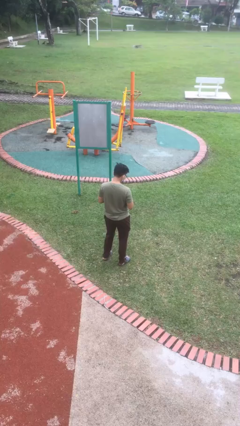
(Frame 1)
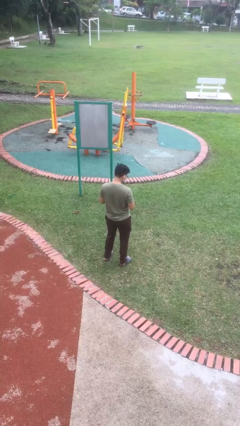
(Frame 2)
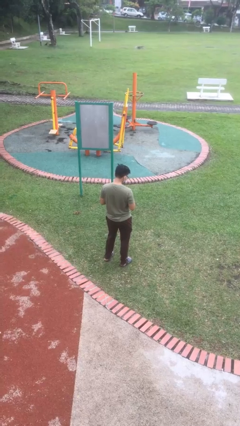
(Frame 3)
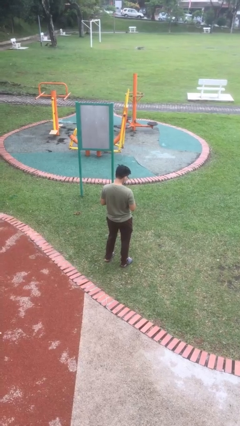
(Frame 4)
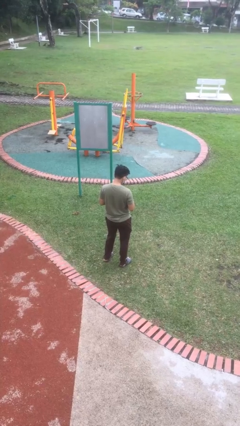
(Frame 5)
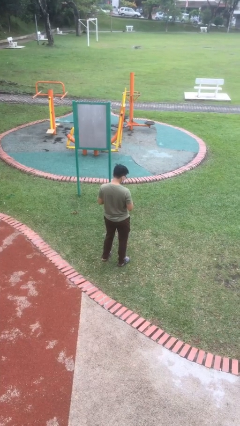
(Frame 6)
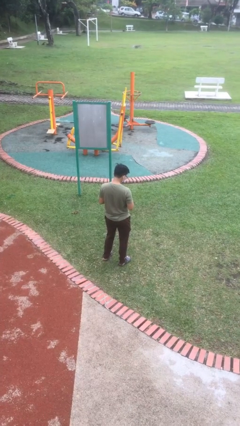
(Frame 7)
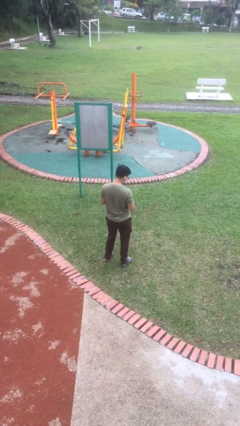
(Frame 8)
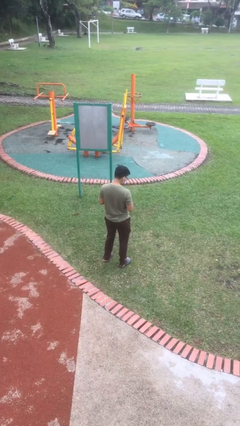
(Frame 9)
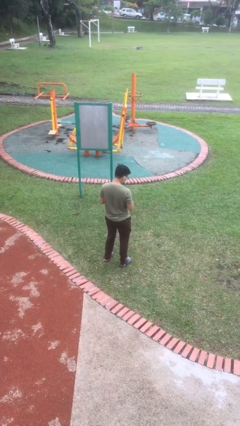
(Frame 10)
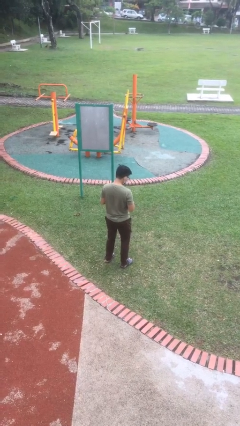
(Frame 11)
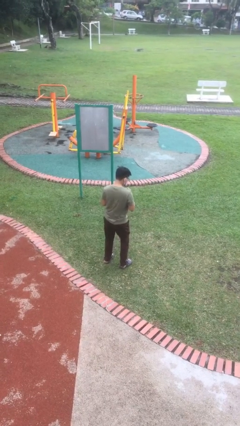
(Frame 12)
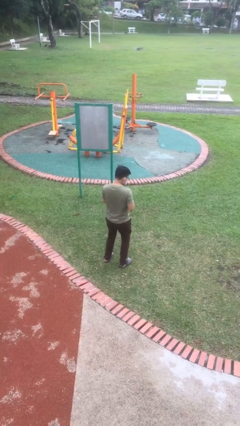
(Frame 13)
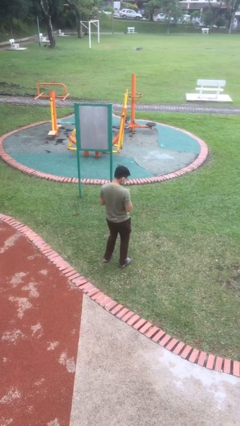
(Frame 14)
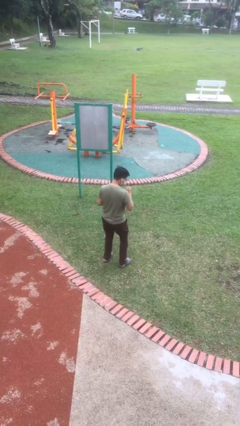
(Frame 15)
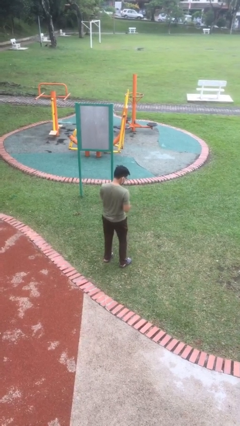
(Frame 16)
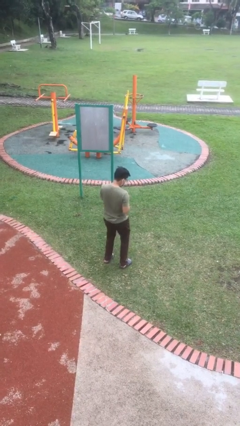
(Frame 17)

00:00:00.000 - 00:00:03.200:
person wiggles hips

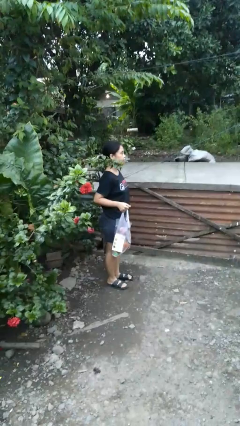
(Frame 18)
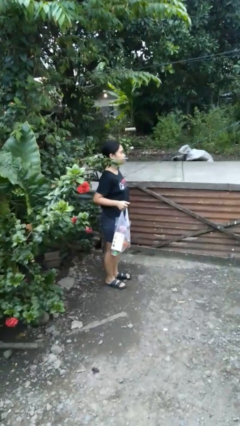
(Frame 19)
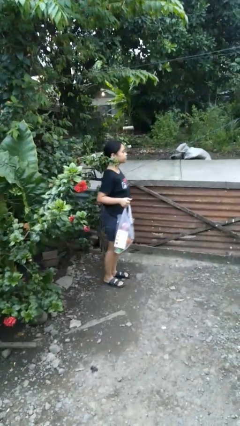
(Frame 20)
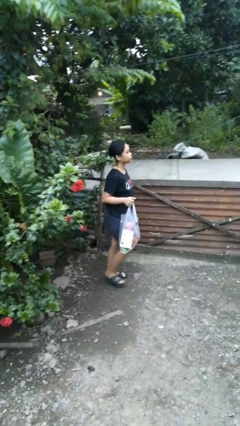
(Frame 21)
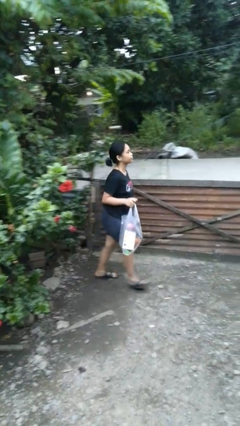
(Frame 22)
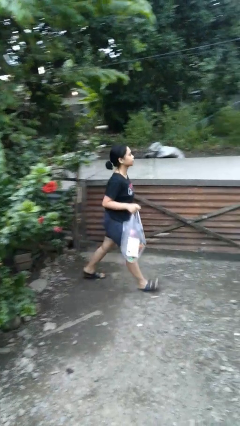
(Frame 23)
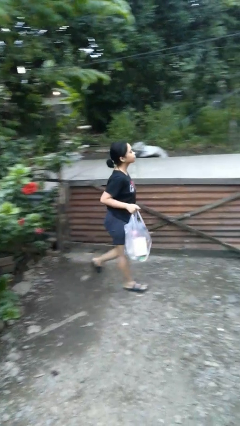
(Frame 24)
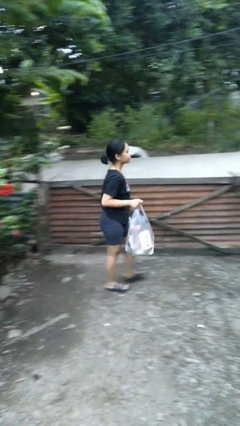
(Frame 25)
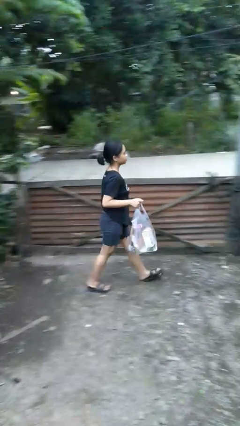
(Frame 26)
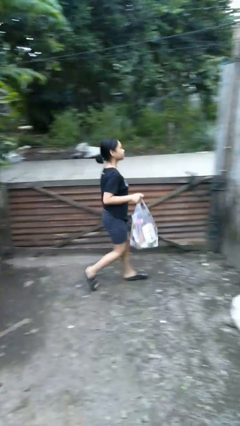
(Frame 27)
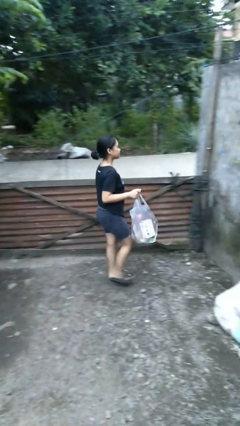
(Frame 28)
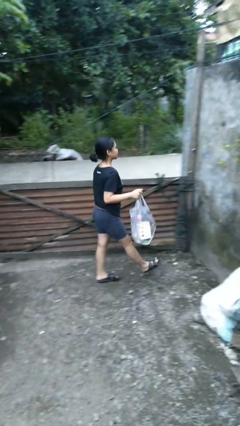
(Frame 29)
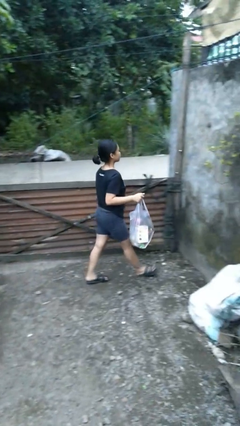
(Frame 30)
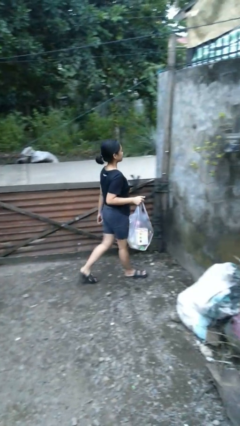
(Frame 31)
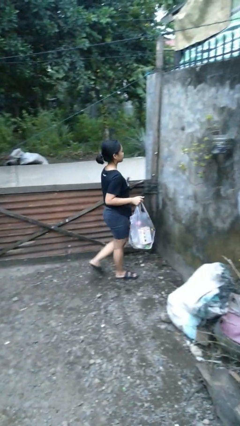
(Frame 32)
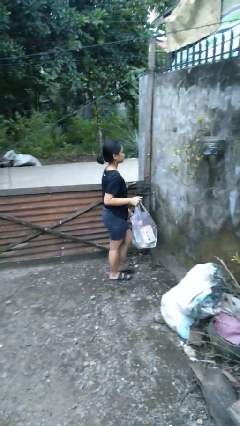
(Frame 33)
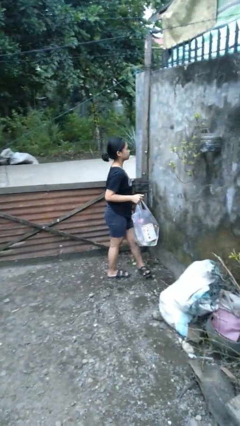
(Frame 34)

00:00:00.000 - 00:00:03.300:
person carries groceries

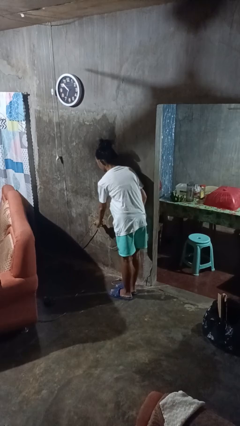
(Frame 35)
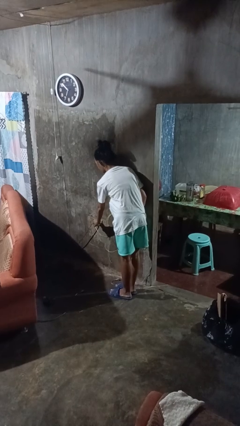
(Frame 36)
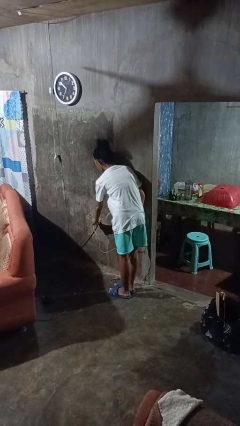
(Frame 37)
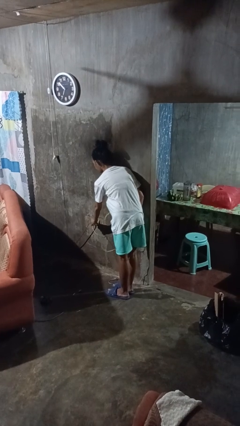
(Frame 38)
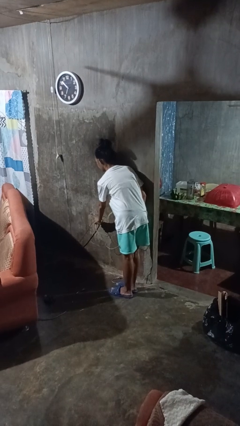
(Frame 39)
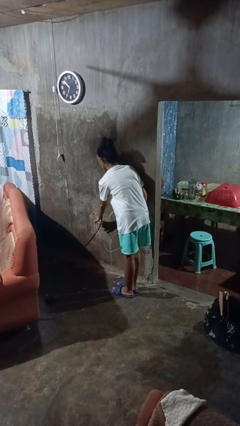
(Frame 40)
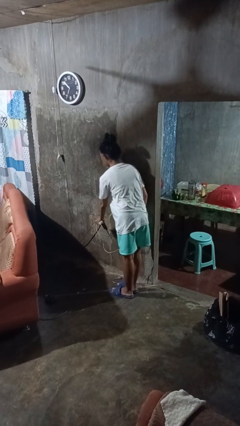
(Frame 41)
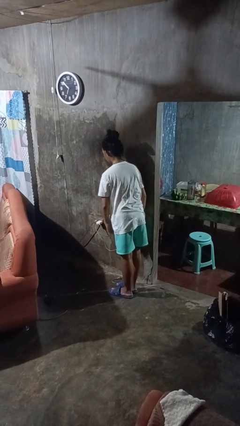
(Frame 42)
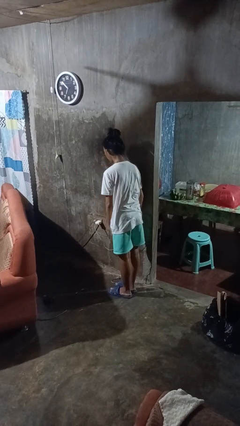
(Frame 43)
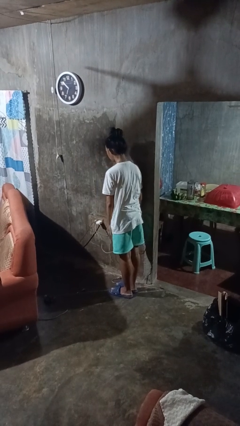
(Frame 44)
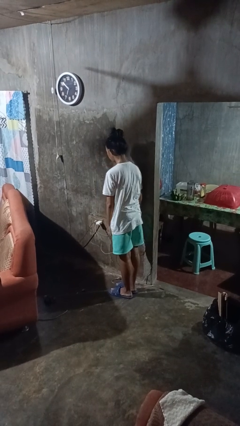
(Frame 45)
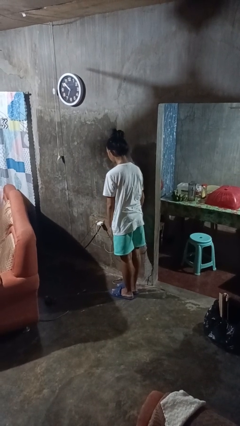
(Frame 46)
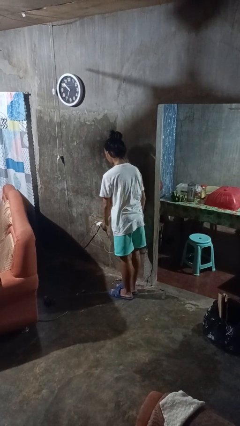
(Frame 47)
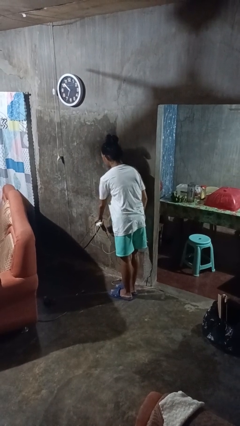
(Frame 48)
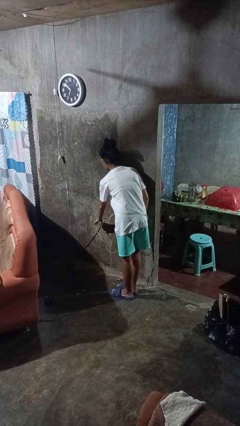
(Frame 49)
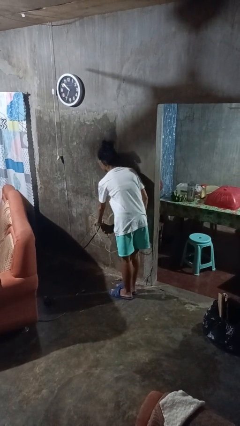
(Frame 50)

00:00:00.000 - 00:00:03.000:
person plugs into electrical socket

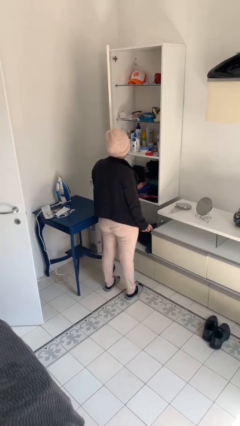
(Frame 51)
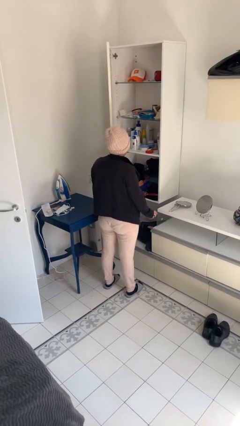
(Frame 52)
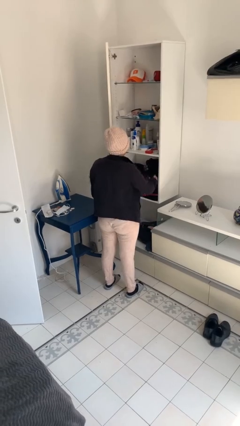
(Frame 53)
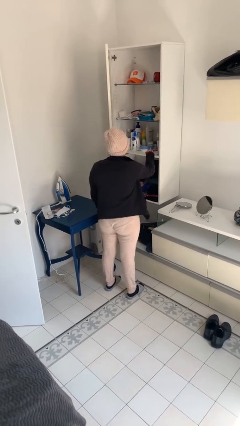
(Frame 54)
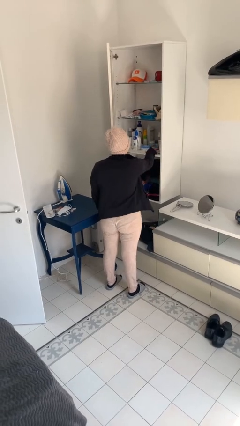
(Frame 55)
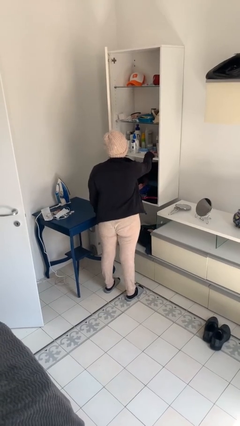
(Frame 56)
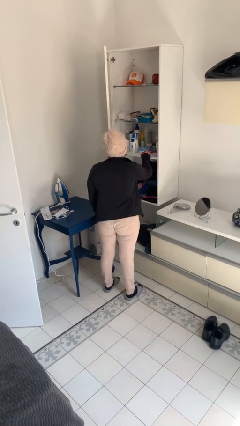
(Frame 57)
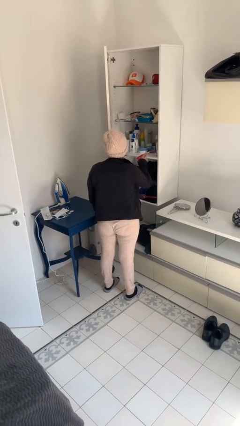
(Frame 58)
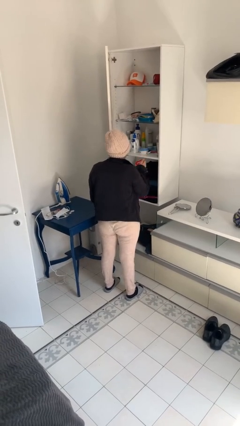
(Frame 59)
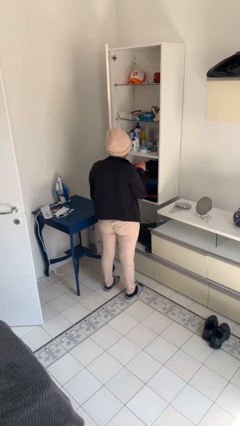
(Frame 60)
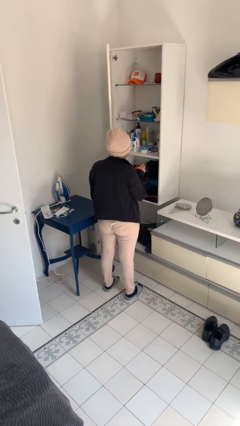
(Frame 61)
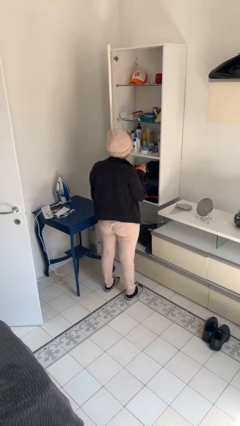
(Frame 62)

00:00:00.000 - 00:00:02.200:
person picks up object from shelf

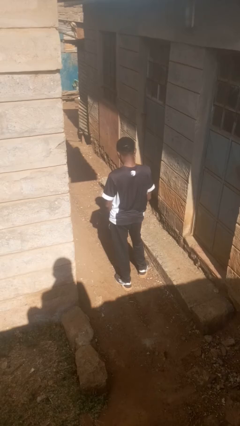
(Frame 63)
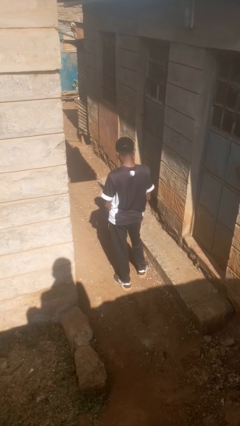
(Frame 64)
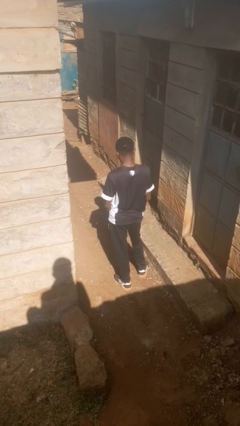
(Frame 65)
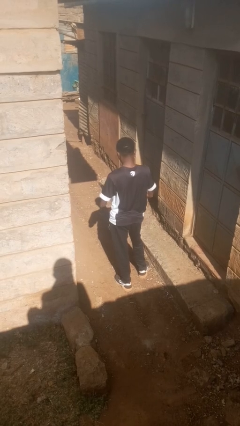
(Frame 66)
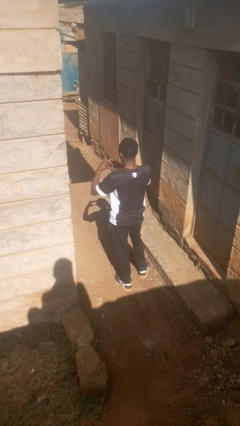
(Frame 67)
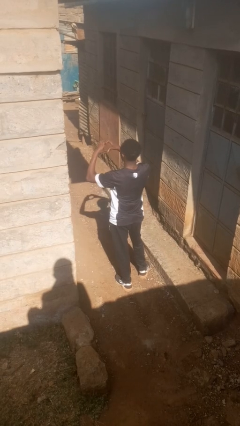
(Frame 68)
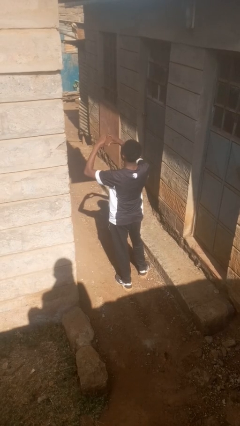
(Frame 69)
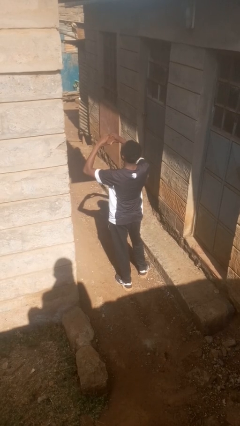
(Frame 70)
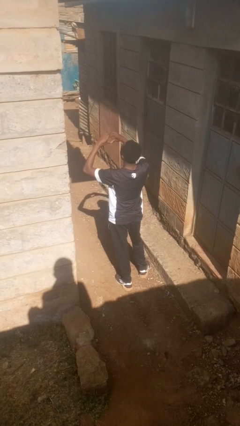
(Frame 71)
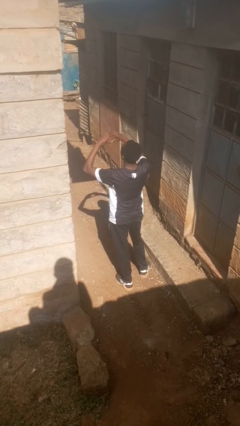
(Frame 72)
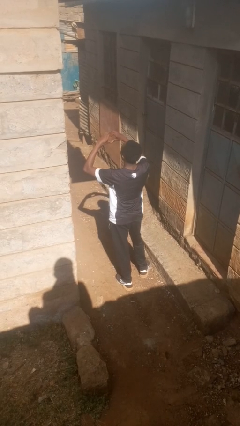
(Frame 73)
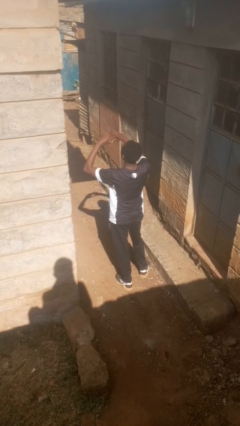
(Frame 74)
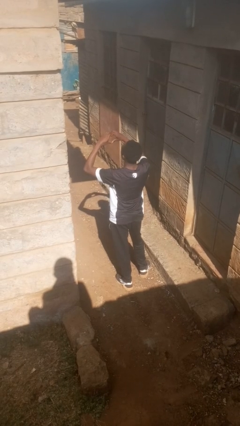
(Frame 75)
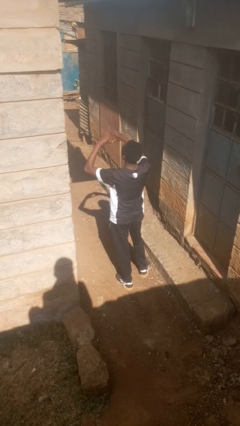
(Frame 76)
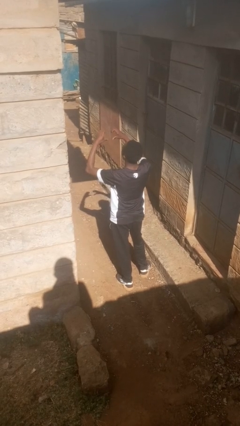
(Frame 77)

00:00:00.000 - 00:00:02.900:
person gestures heart

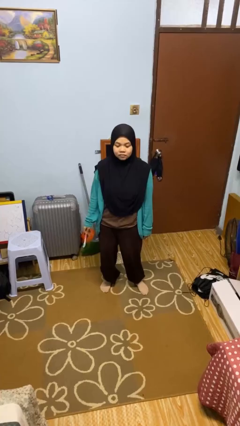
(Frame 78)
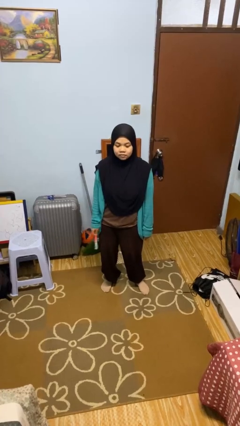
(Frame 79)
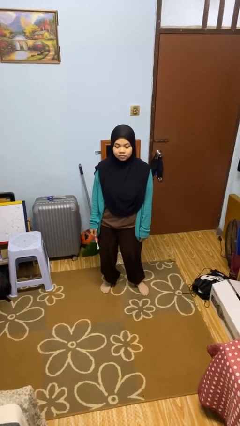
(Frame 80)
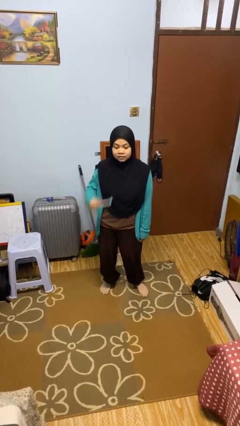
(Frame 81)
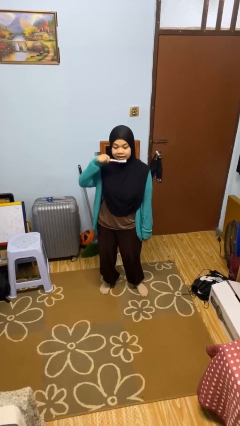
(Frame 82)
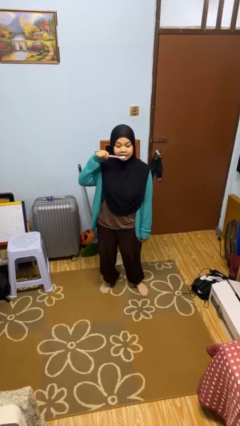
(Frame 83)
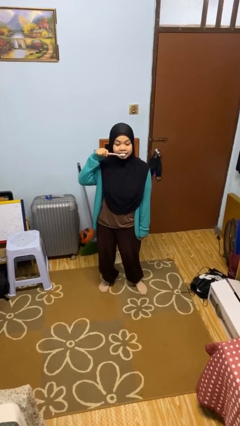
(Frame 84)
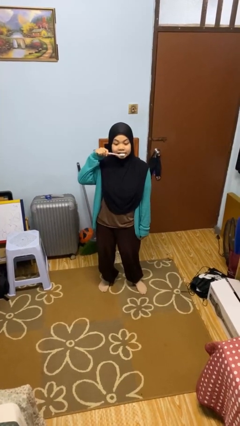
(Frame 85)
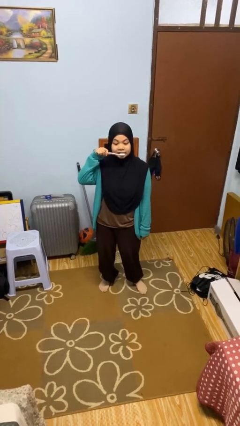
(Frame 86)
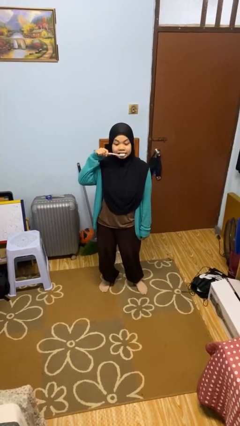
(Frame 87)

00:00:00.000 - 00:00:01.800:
person brushes teeth

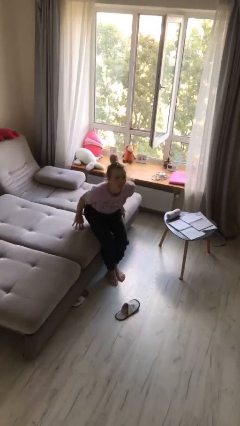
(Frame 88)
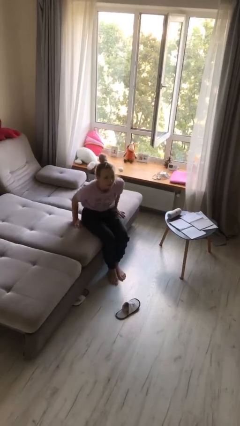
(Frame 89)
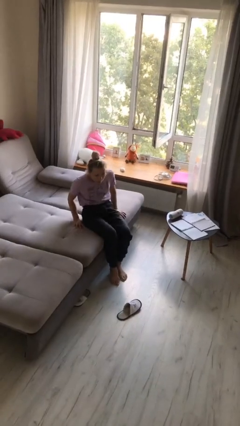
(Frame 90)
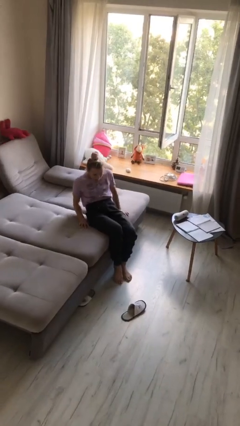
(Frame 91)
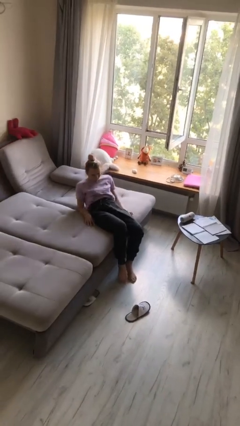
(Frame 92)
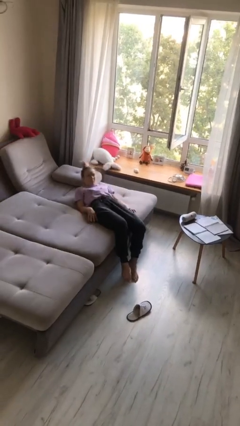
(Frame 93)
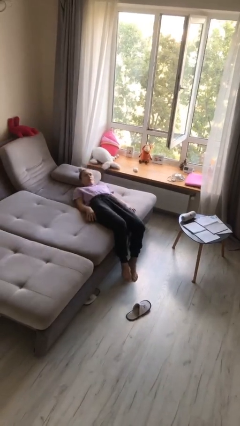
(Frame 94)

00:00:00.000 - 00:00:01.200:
person lies down on bed
